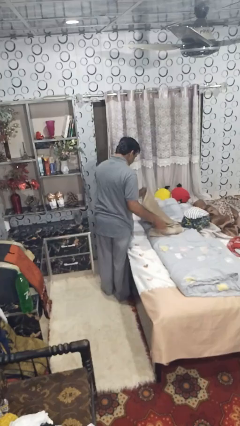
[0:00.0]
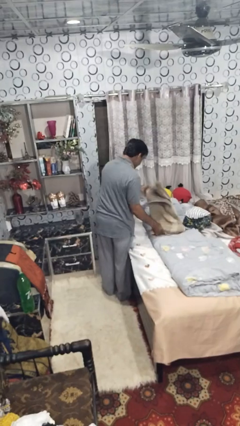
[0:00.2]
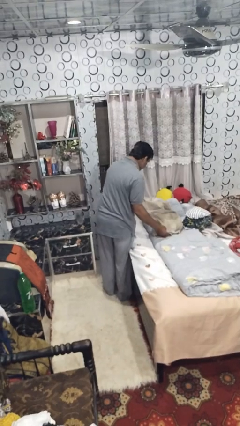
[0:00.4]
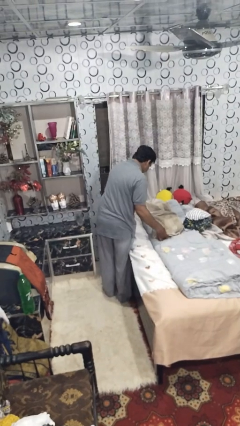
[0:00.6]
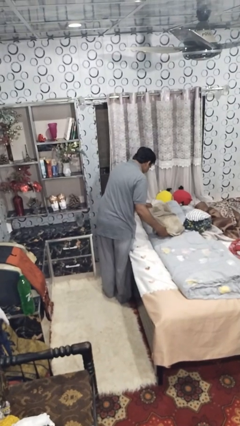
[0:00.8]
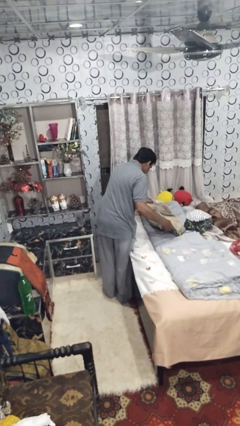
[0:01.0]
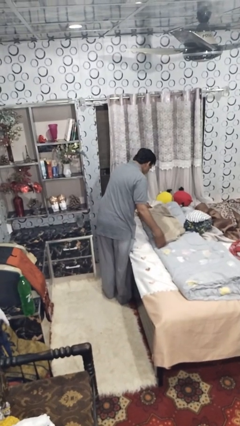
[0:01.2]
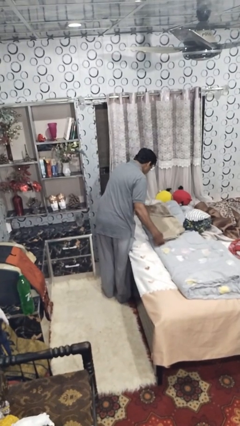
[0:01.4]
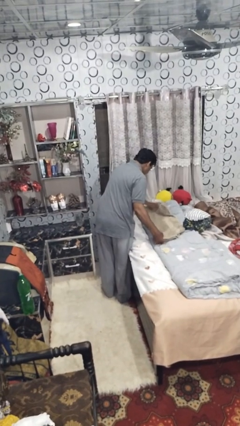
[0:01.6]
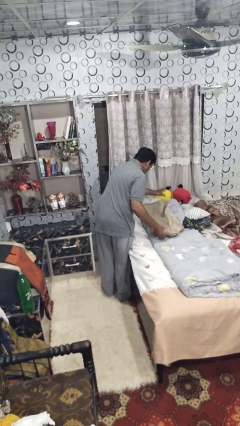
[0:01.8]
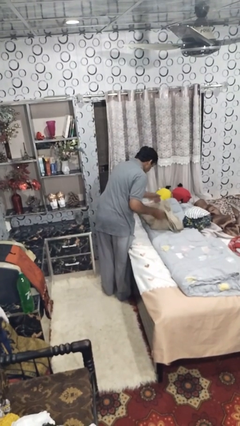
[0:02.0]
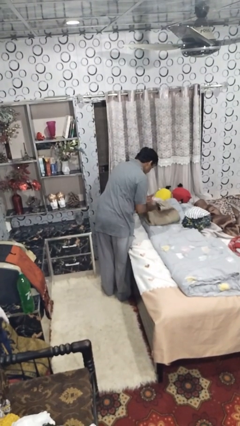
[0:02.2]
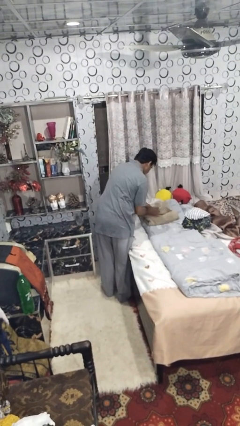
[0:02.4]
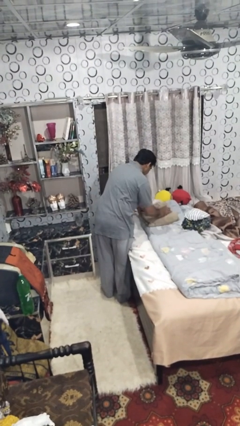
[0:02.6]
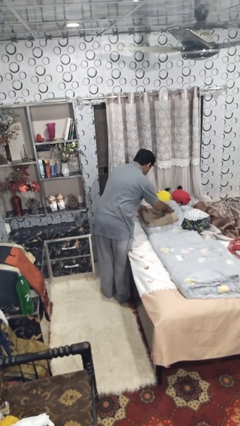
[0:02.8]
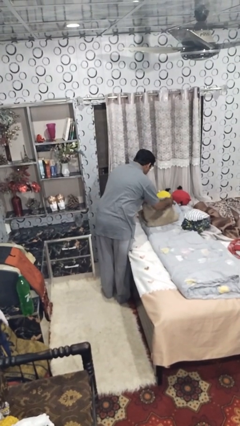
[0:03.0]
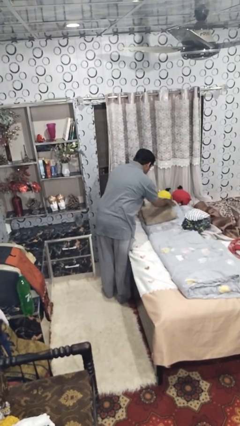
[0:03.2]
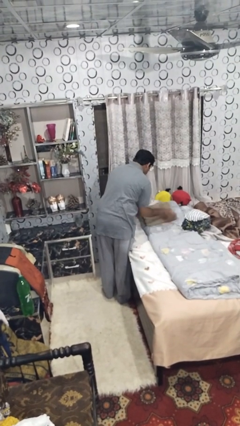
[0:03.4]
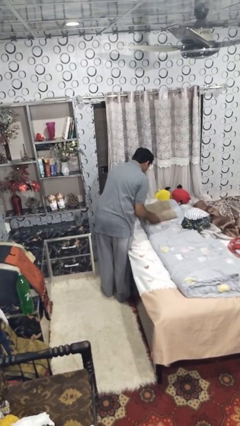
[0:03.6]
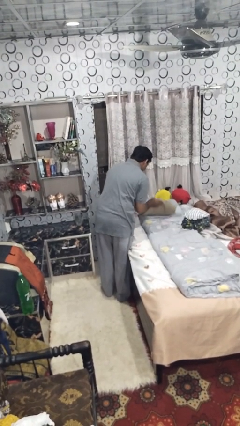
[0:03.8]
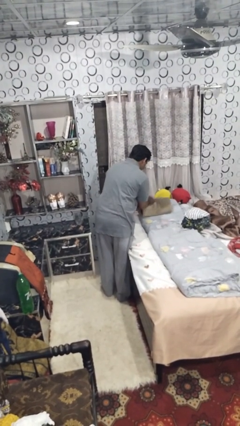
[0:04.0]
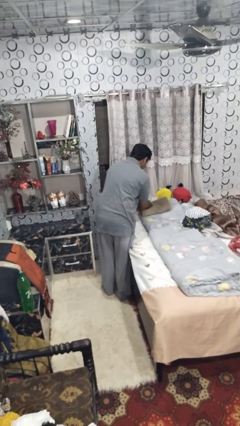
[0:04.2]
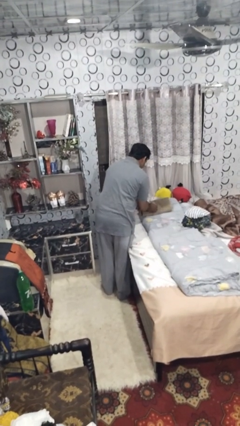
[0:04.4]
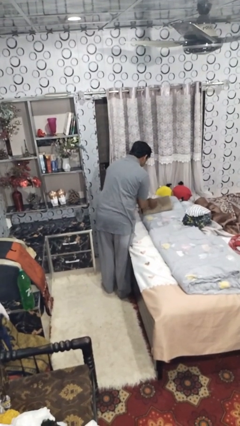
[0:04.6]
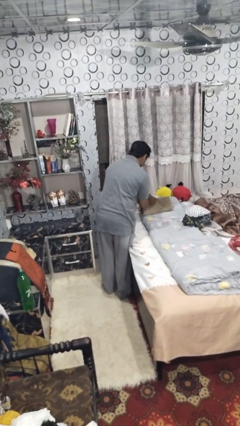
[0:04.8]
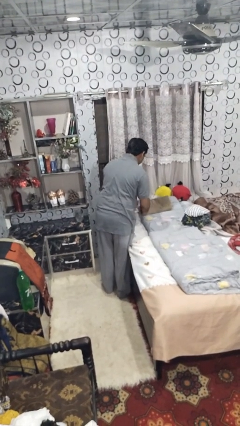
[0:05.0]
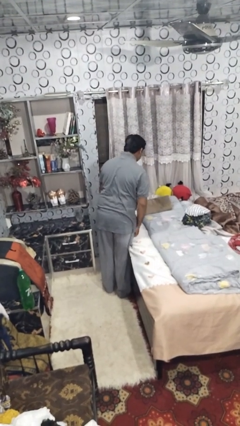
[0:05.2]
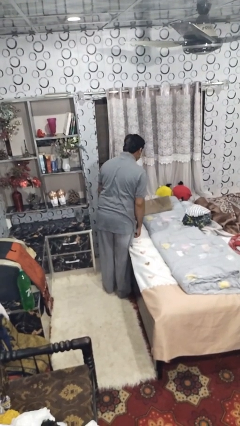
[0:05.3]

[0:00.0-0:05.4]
person folds towel

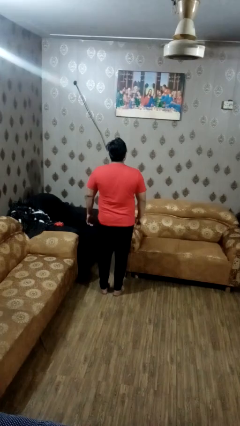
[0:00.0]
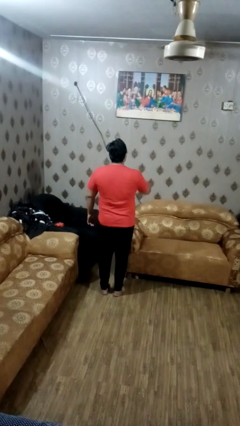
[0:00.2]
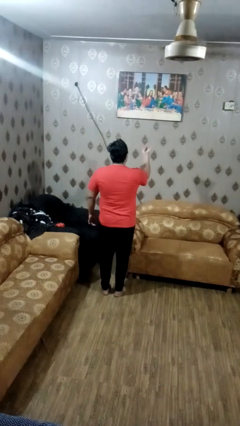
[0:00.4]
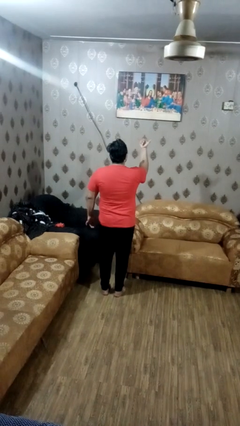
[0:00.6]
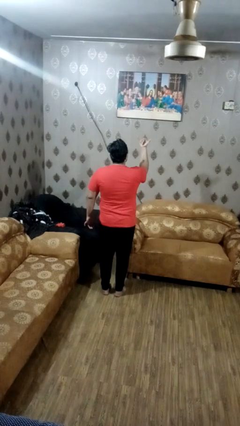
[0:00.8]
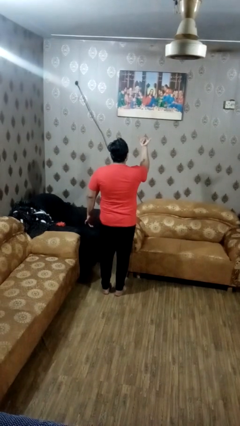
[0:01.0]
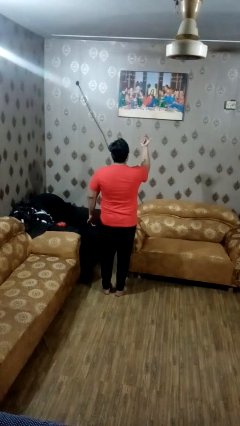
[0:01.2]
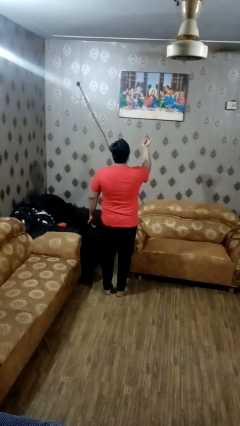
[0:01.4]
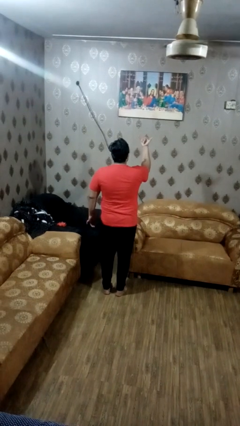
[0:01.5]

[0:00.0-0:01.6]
person gestures hang loose

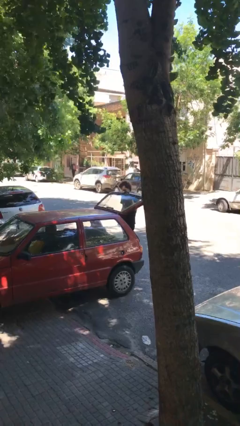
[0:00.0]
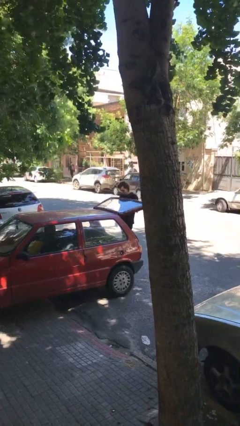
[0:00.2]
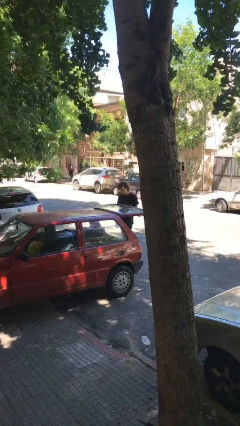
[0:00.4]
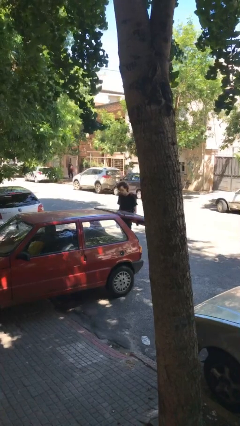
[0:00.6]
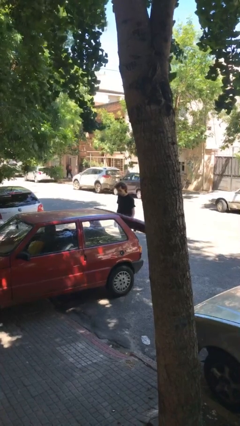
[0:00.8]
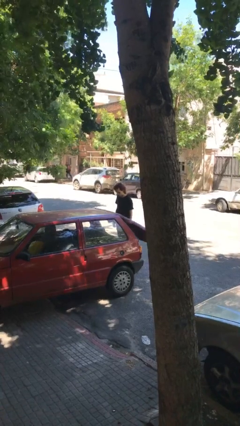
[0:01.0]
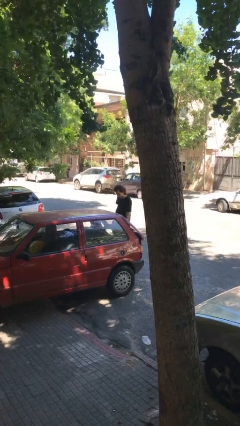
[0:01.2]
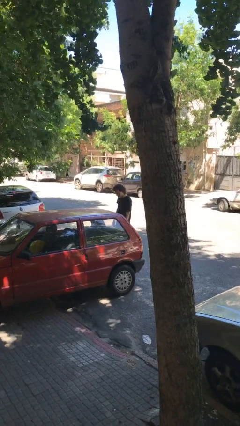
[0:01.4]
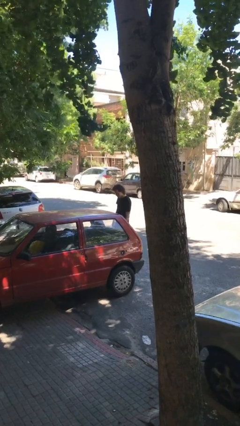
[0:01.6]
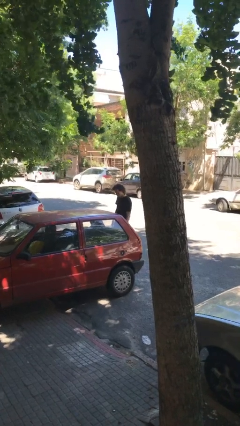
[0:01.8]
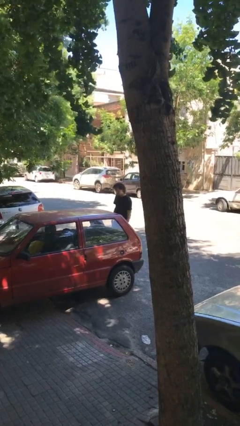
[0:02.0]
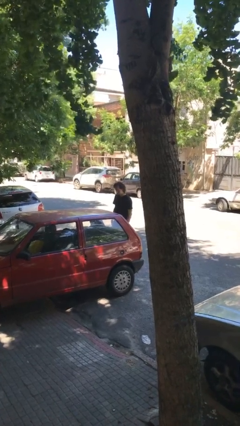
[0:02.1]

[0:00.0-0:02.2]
person closes car trunk

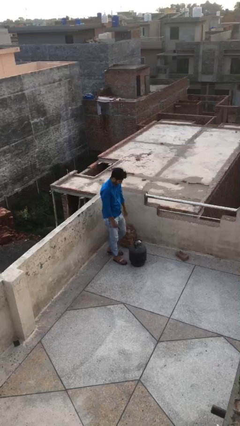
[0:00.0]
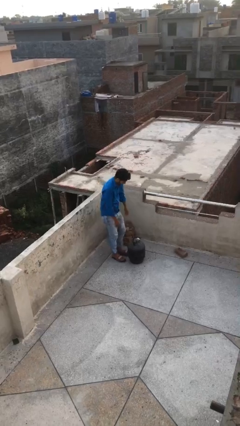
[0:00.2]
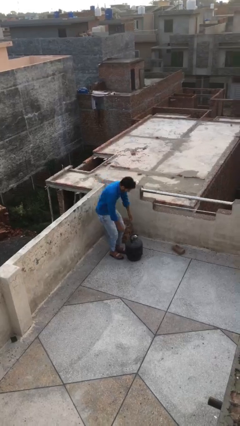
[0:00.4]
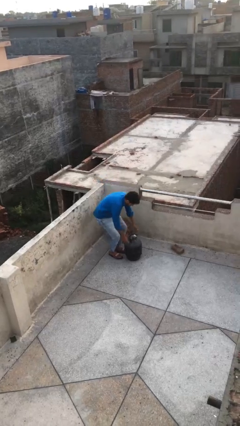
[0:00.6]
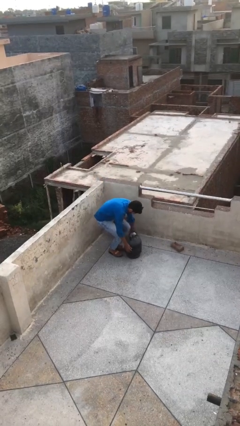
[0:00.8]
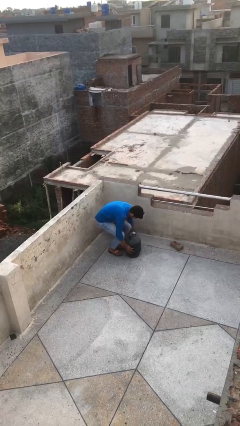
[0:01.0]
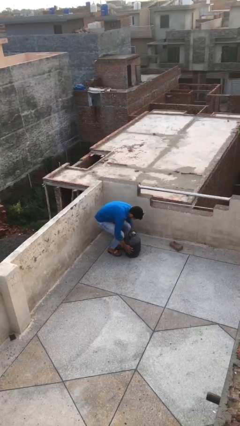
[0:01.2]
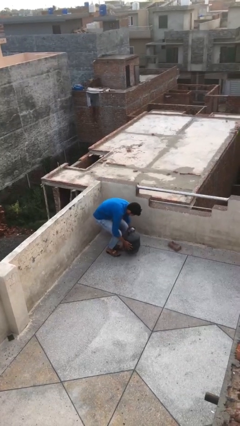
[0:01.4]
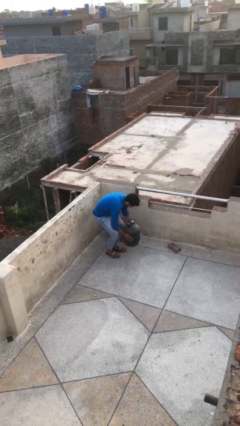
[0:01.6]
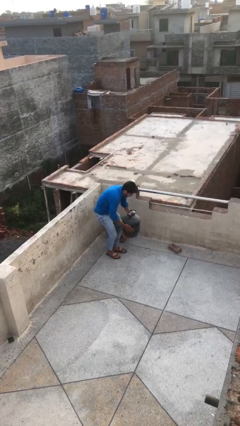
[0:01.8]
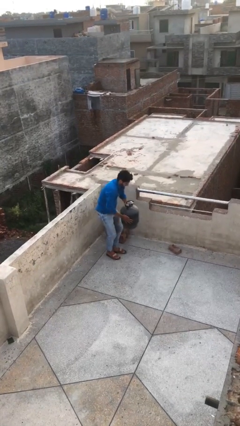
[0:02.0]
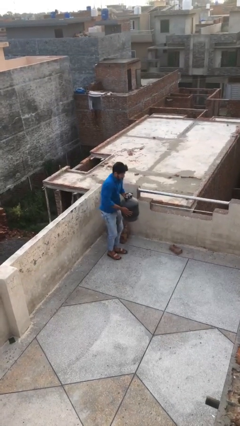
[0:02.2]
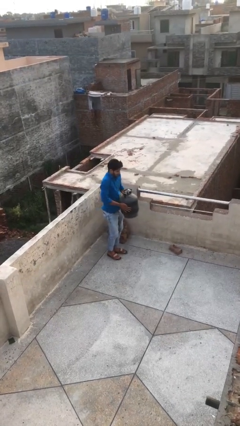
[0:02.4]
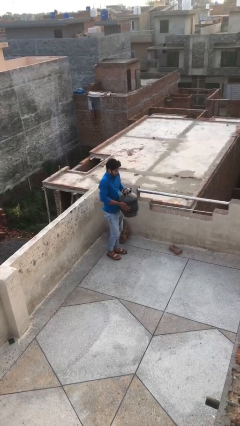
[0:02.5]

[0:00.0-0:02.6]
person picks up object from floor

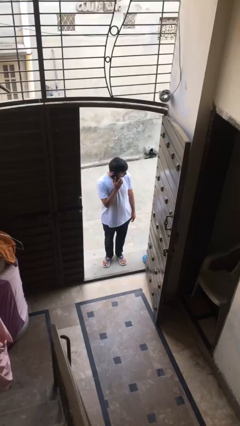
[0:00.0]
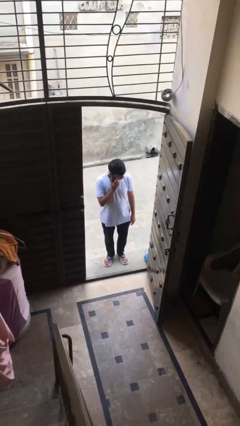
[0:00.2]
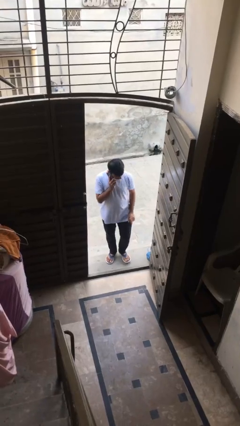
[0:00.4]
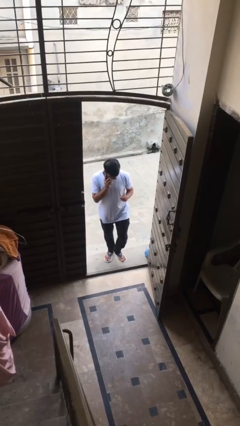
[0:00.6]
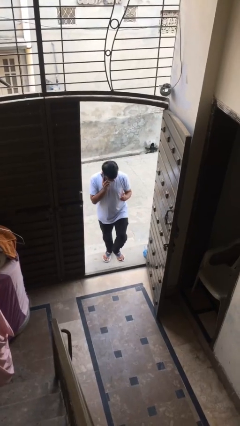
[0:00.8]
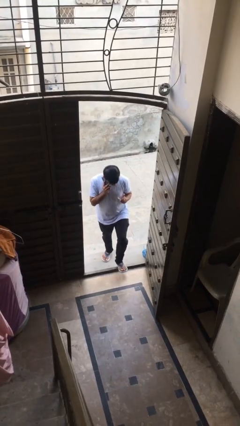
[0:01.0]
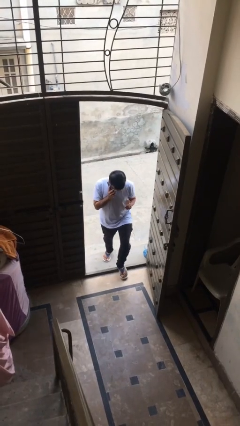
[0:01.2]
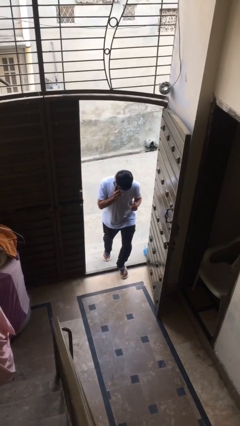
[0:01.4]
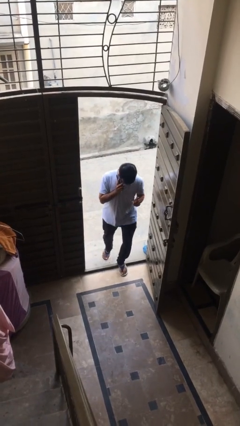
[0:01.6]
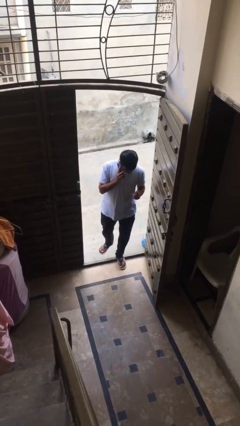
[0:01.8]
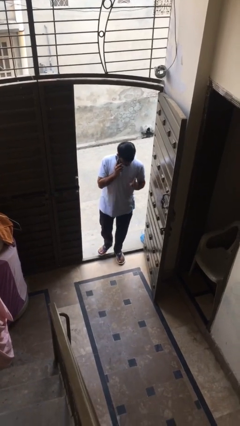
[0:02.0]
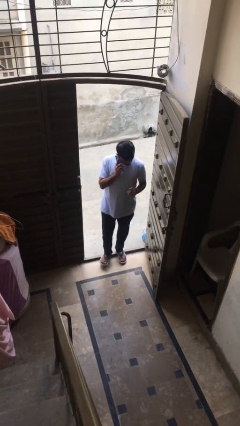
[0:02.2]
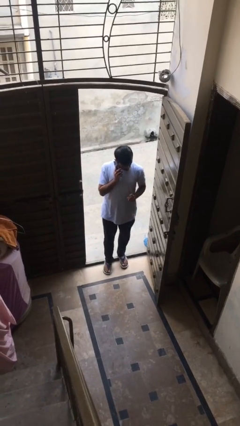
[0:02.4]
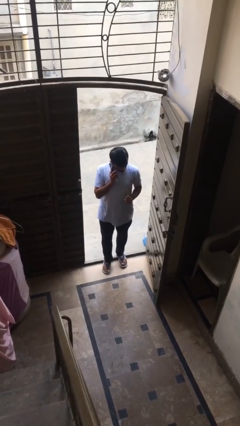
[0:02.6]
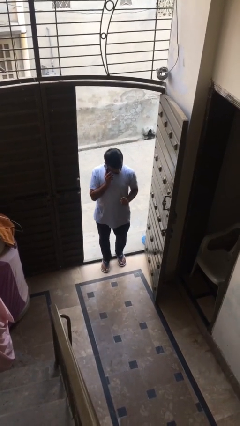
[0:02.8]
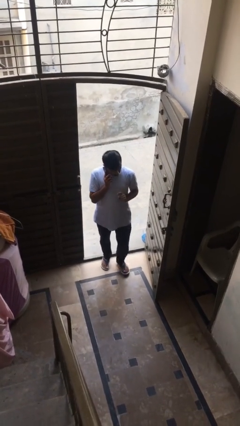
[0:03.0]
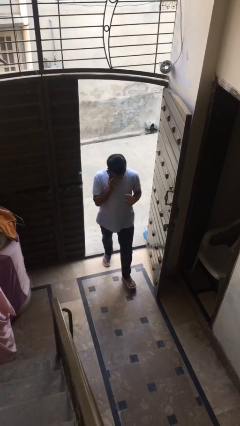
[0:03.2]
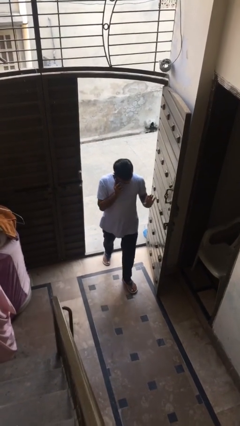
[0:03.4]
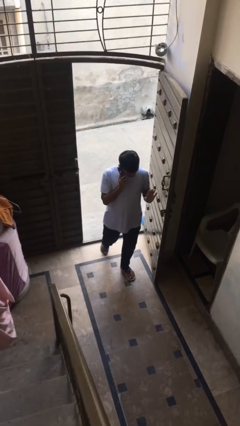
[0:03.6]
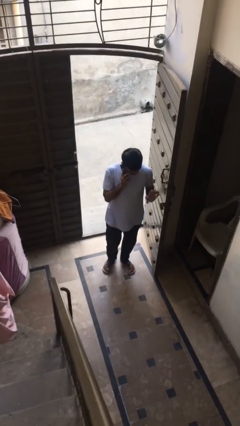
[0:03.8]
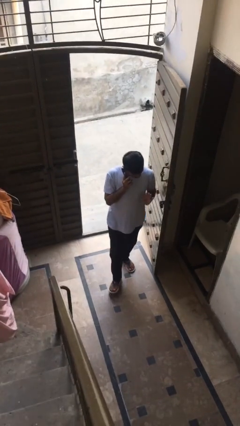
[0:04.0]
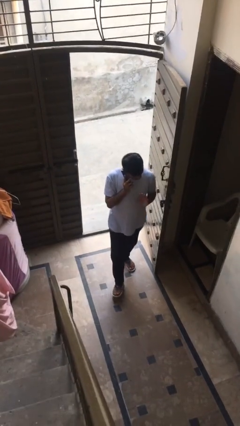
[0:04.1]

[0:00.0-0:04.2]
person enters scene through structure

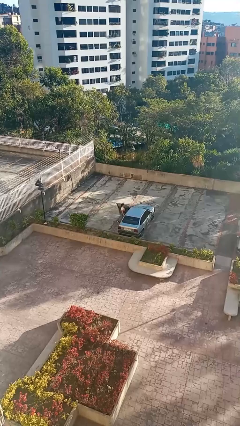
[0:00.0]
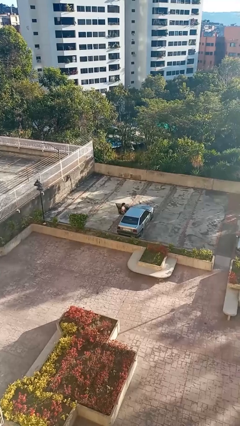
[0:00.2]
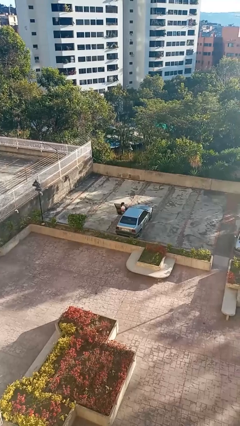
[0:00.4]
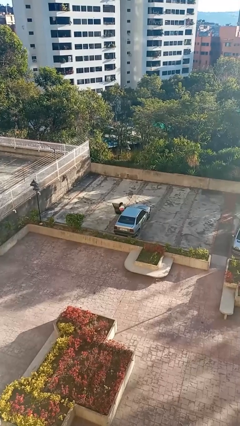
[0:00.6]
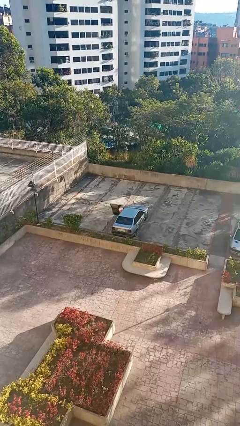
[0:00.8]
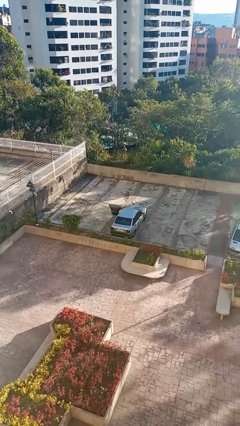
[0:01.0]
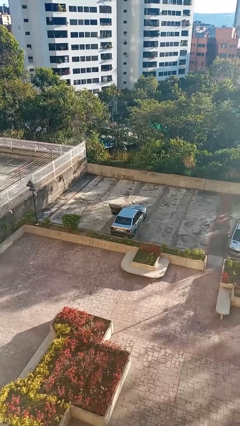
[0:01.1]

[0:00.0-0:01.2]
person enters car

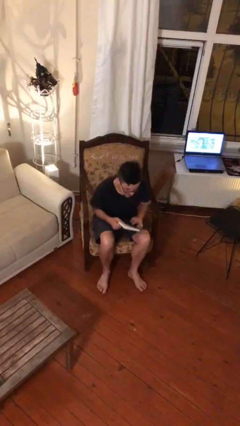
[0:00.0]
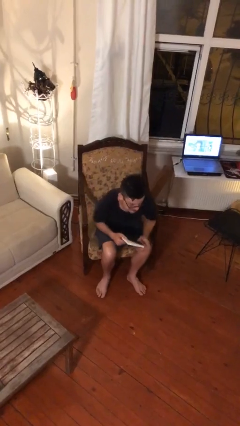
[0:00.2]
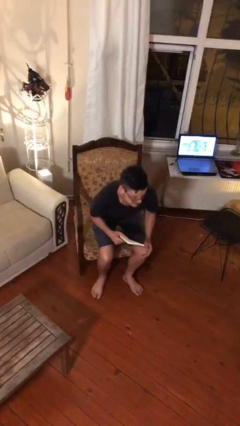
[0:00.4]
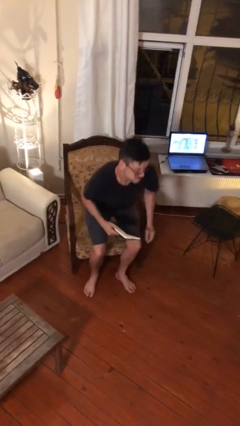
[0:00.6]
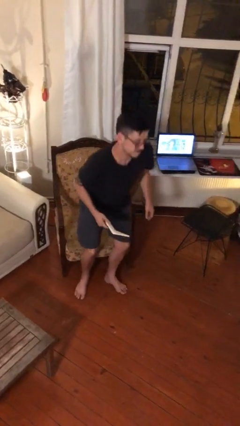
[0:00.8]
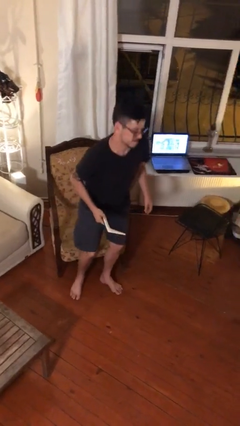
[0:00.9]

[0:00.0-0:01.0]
person stands up
